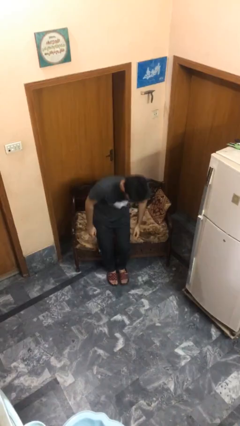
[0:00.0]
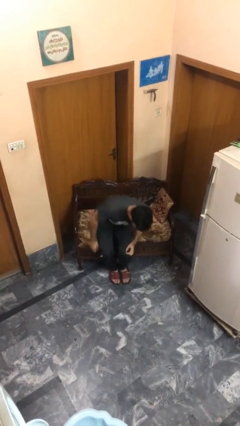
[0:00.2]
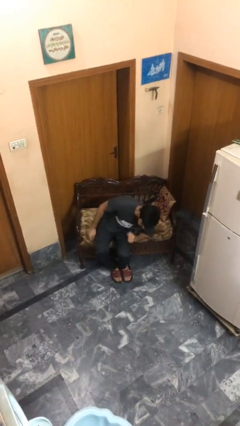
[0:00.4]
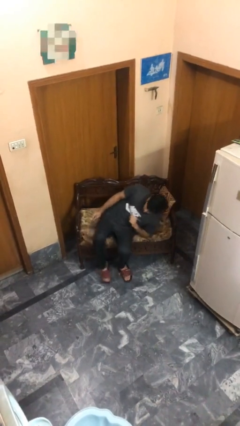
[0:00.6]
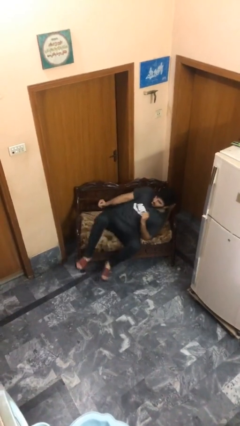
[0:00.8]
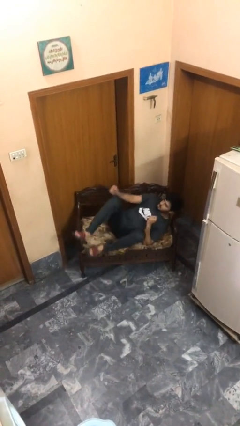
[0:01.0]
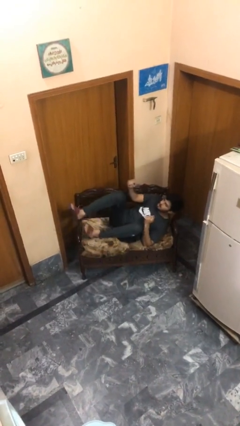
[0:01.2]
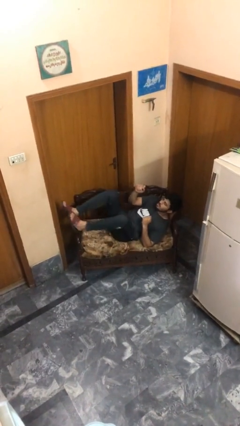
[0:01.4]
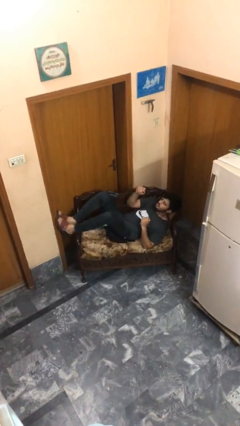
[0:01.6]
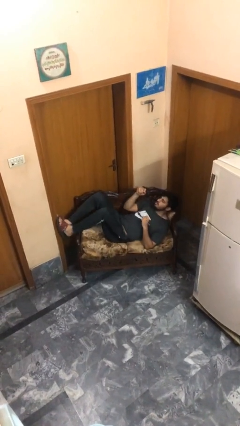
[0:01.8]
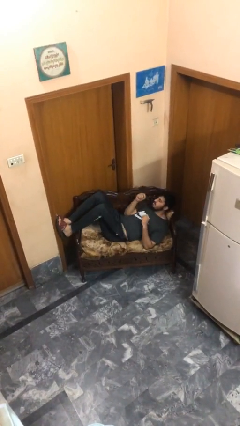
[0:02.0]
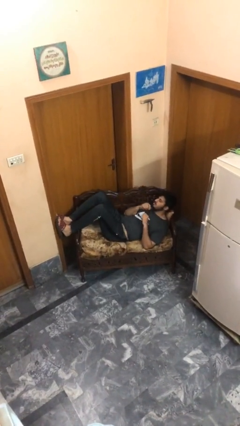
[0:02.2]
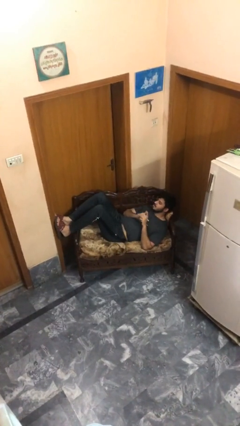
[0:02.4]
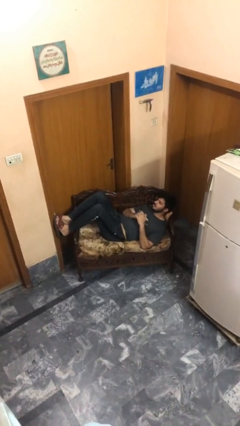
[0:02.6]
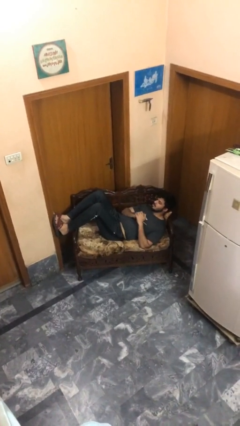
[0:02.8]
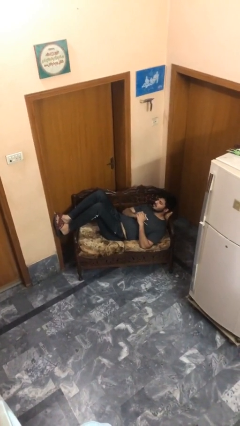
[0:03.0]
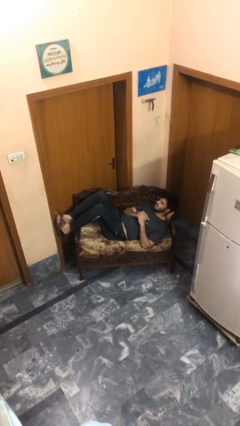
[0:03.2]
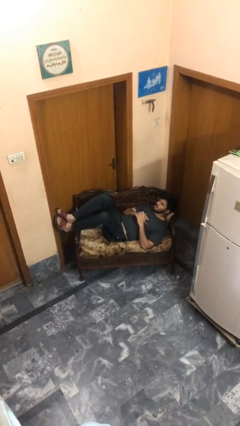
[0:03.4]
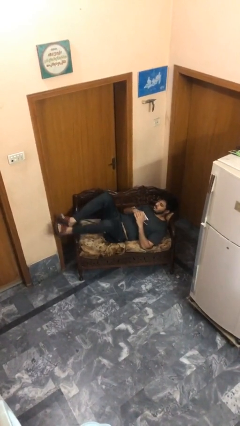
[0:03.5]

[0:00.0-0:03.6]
person lies down on couch

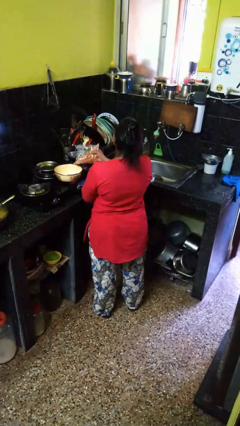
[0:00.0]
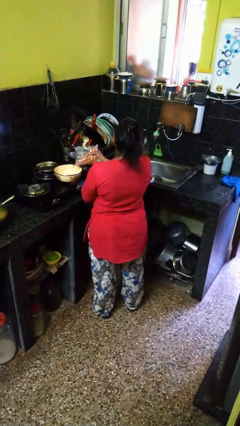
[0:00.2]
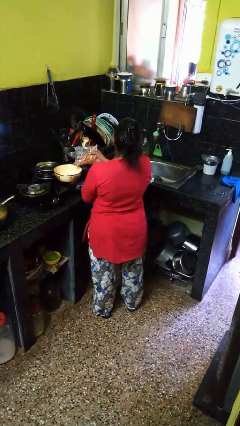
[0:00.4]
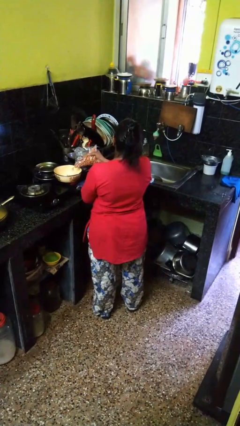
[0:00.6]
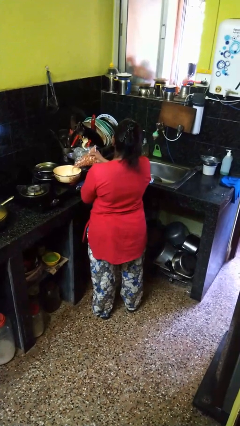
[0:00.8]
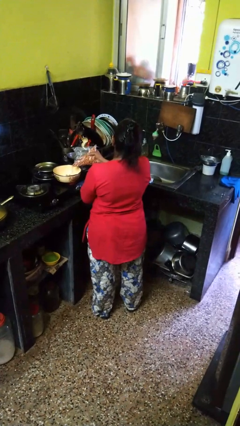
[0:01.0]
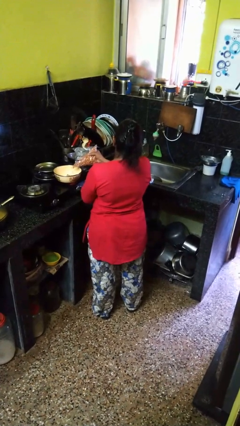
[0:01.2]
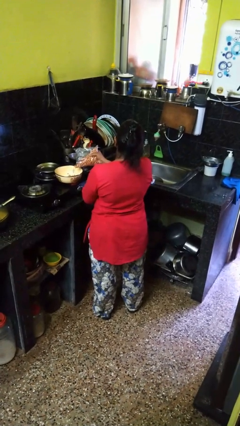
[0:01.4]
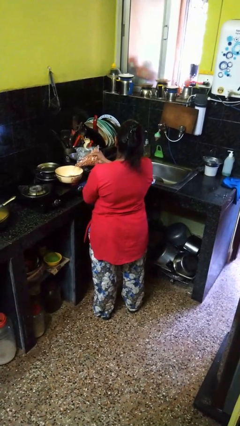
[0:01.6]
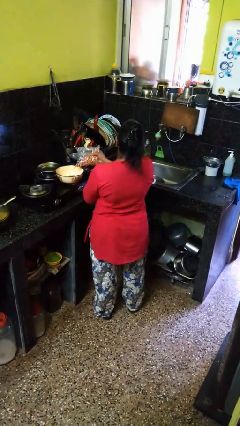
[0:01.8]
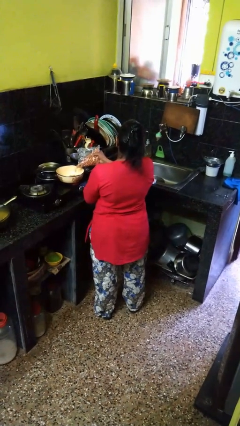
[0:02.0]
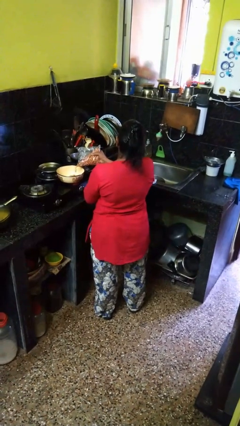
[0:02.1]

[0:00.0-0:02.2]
person pours into bowl

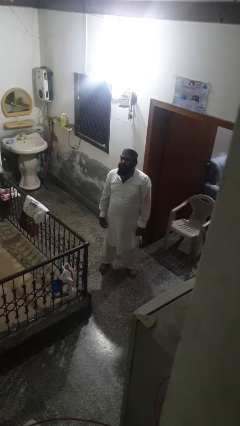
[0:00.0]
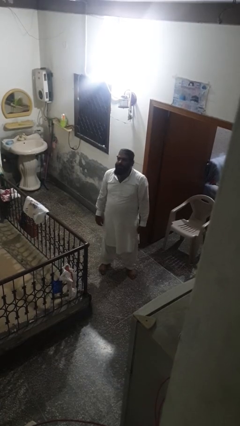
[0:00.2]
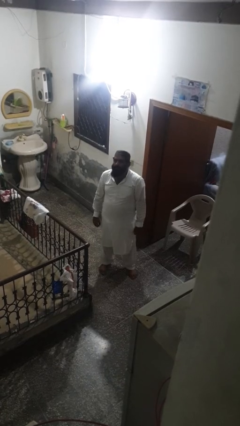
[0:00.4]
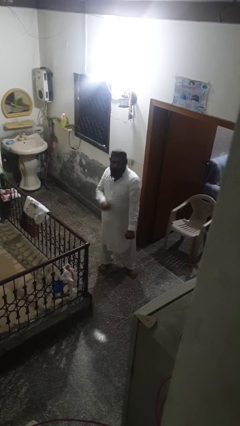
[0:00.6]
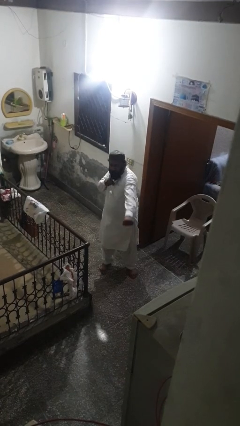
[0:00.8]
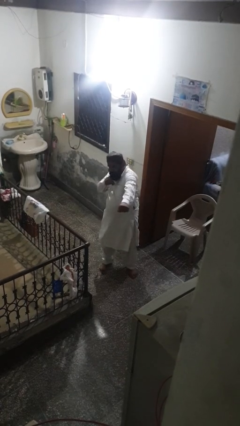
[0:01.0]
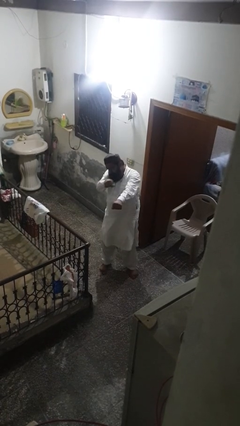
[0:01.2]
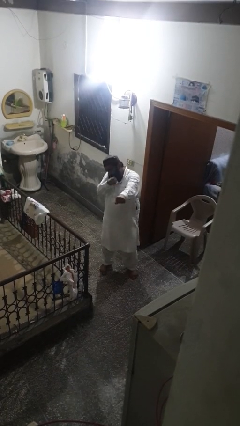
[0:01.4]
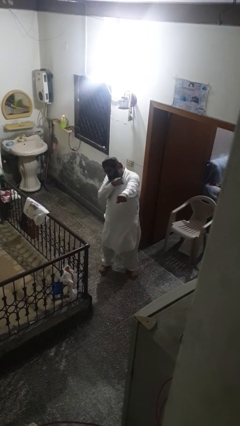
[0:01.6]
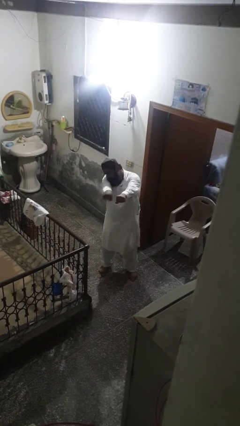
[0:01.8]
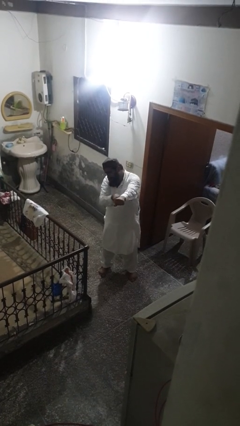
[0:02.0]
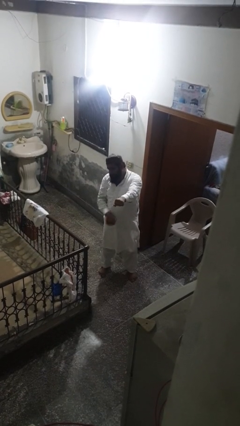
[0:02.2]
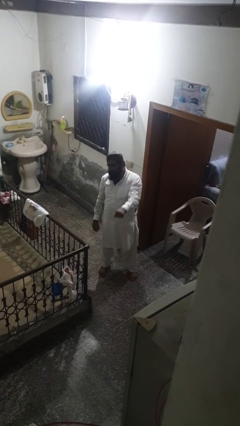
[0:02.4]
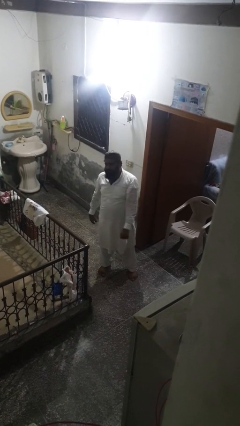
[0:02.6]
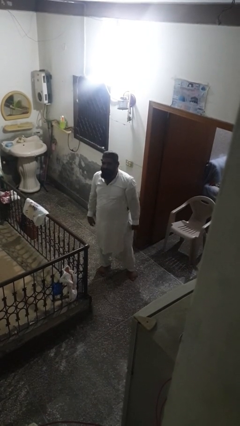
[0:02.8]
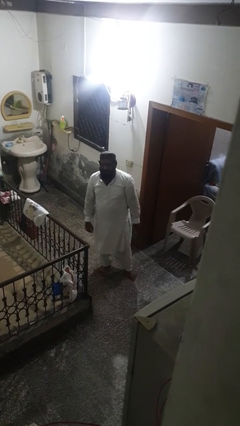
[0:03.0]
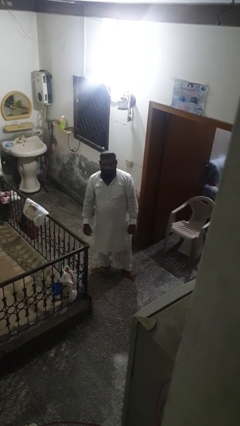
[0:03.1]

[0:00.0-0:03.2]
person punches

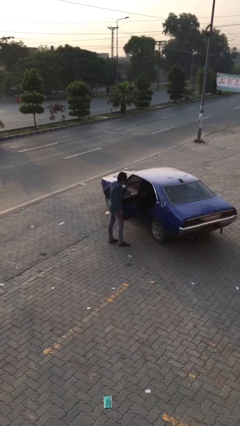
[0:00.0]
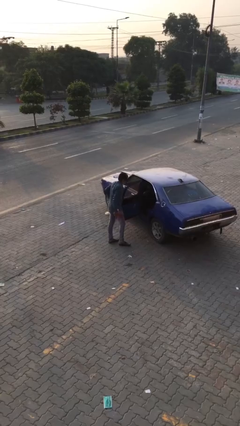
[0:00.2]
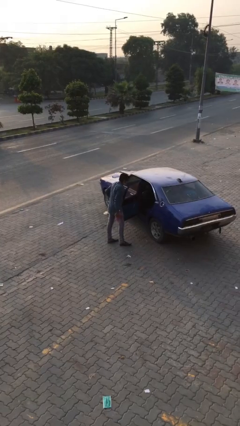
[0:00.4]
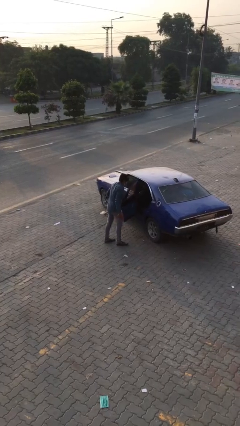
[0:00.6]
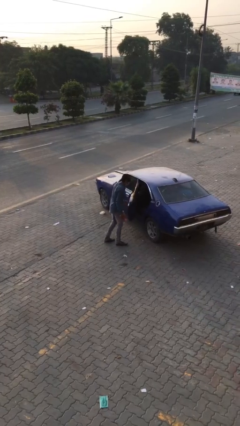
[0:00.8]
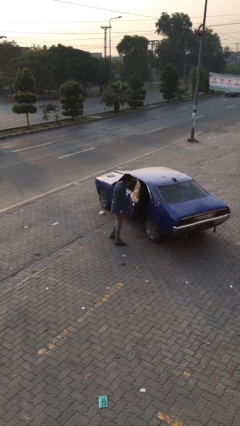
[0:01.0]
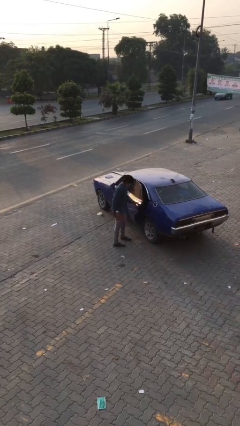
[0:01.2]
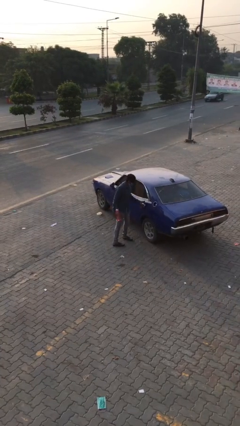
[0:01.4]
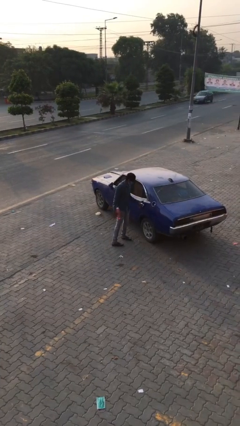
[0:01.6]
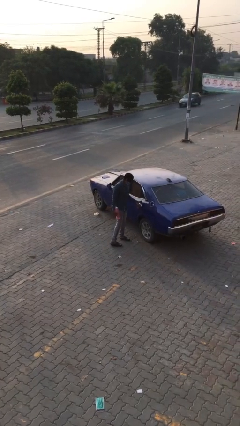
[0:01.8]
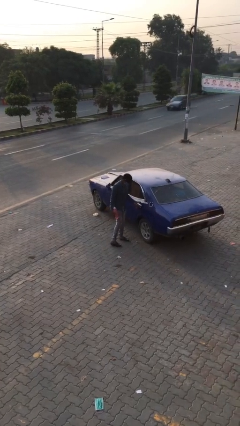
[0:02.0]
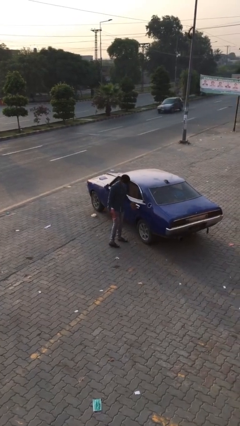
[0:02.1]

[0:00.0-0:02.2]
person closes car door

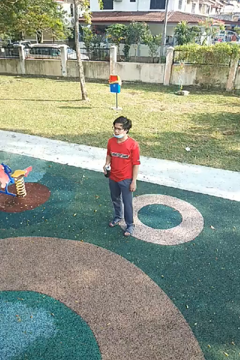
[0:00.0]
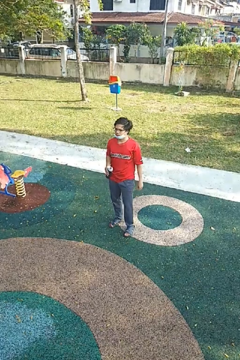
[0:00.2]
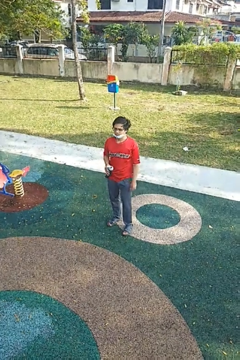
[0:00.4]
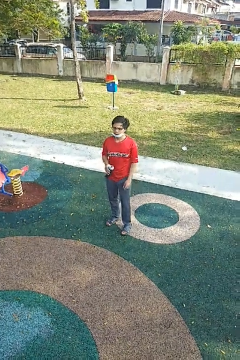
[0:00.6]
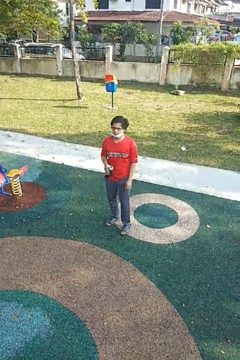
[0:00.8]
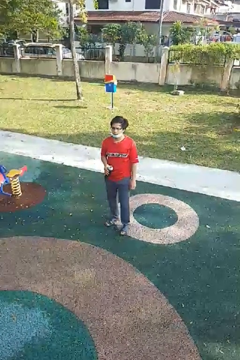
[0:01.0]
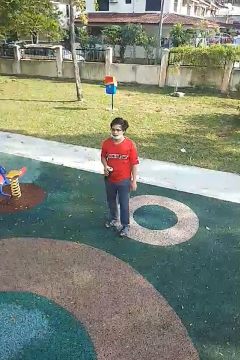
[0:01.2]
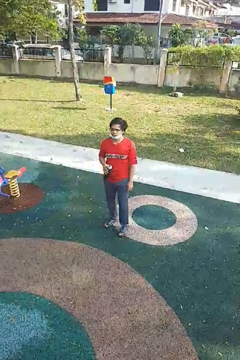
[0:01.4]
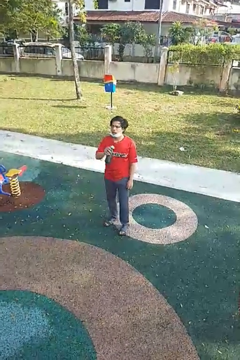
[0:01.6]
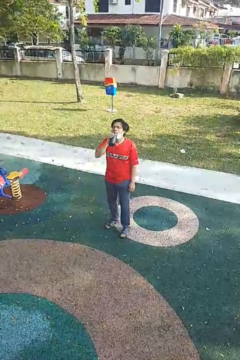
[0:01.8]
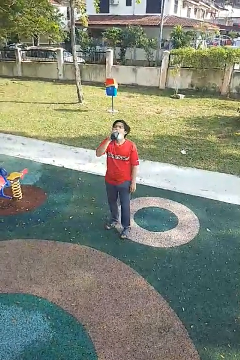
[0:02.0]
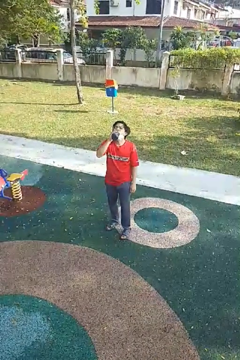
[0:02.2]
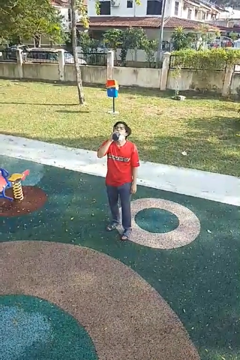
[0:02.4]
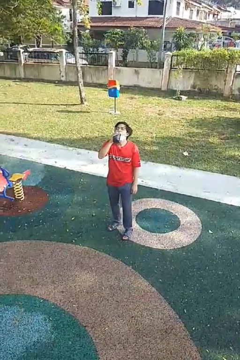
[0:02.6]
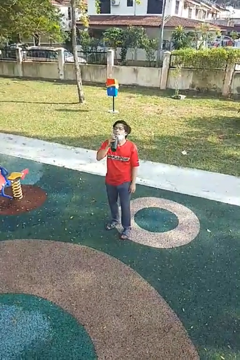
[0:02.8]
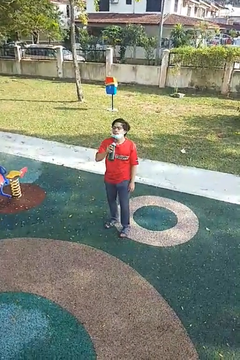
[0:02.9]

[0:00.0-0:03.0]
person drinks from bottle

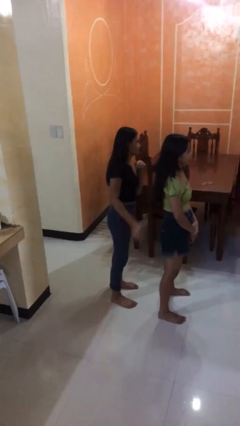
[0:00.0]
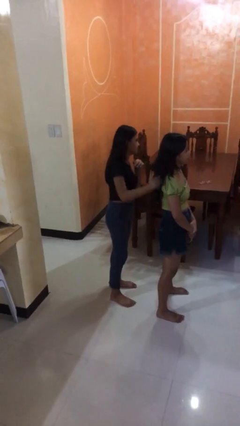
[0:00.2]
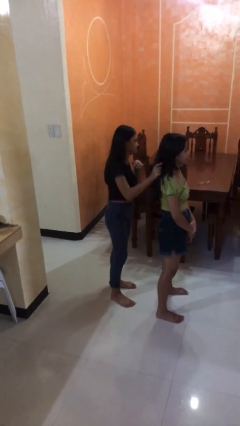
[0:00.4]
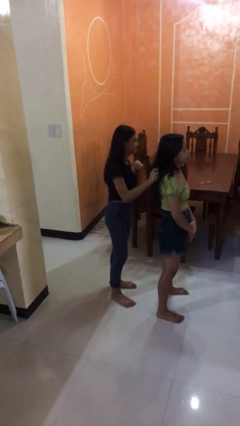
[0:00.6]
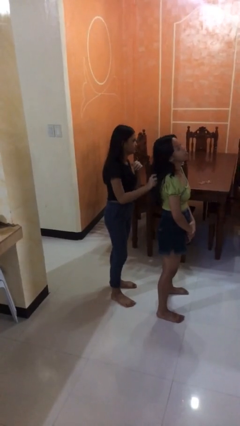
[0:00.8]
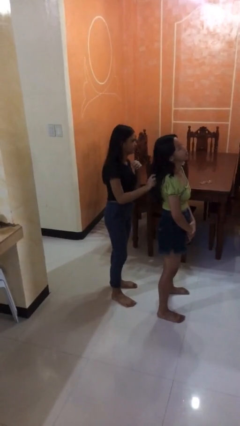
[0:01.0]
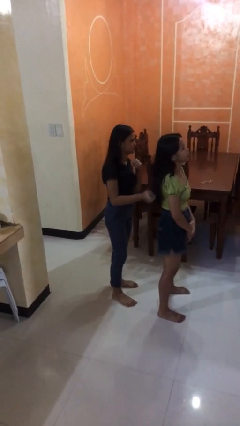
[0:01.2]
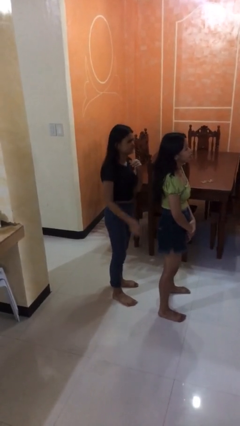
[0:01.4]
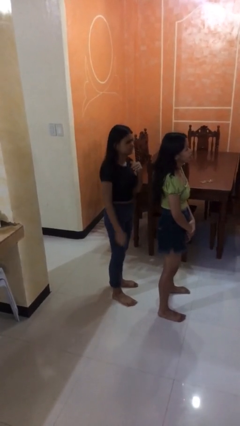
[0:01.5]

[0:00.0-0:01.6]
person grabs person by hair

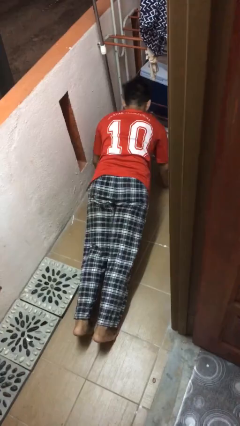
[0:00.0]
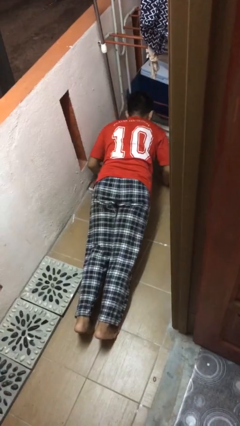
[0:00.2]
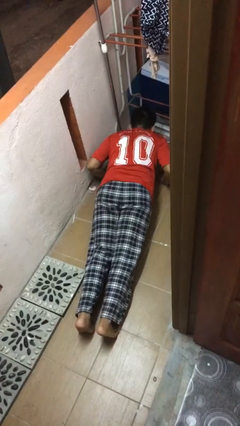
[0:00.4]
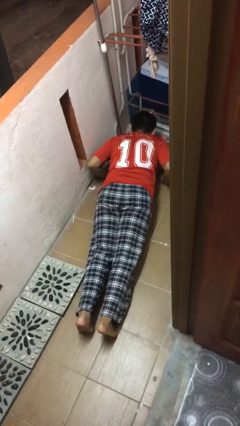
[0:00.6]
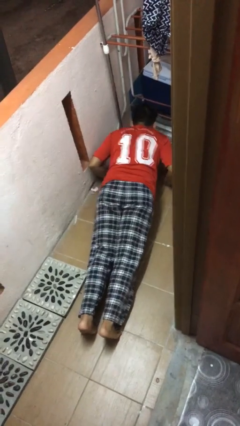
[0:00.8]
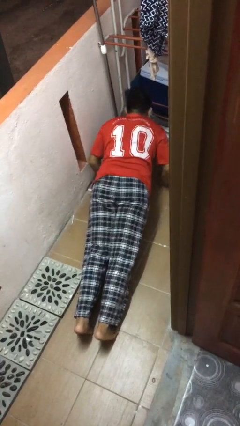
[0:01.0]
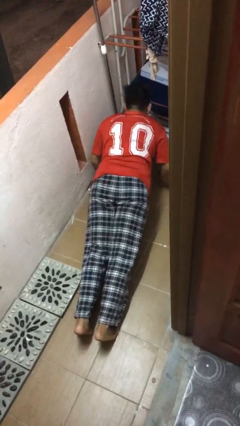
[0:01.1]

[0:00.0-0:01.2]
person exercises with pushup

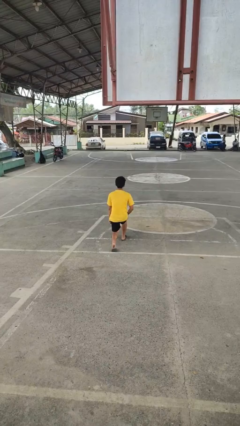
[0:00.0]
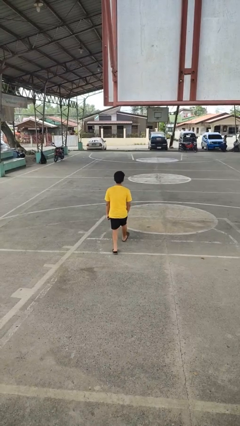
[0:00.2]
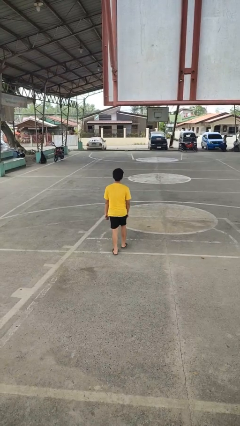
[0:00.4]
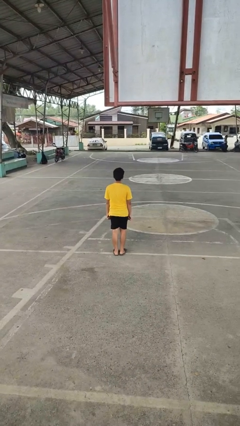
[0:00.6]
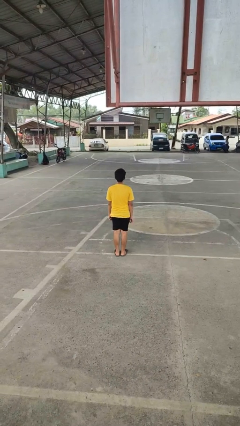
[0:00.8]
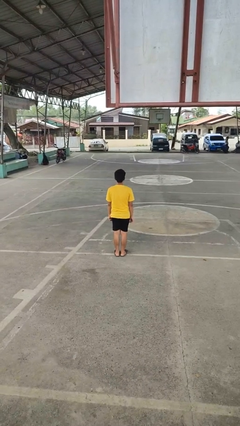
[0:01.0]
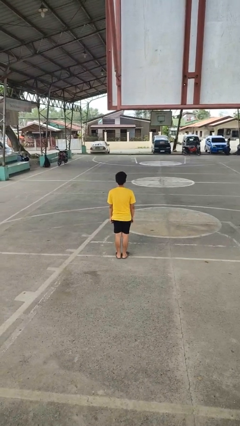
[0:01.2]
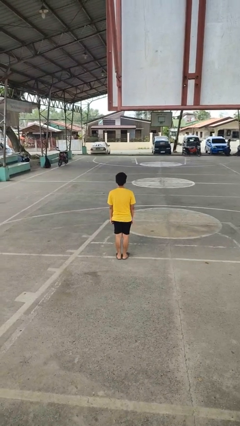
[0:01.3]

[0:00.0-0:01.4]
person stands up from floor
